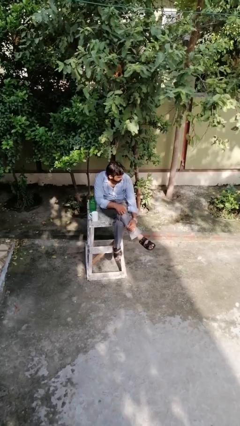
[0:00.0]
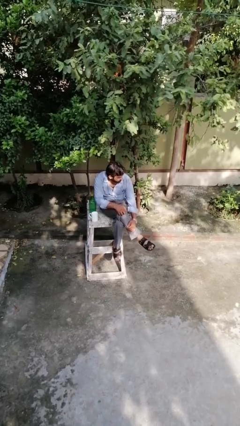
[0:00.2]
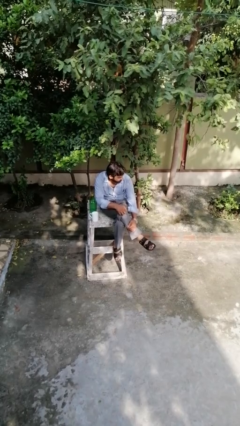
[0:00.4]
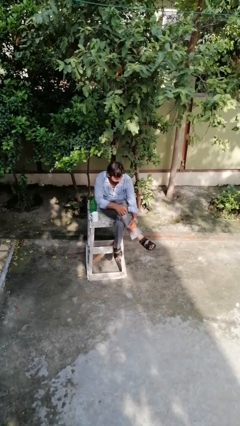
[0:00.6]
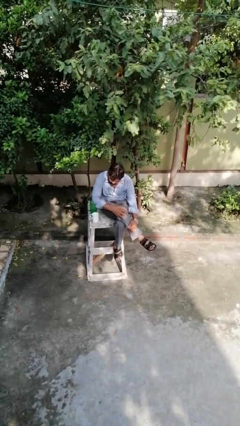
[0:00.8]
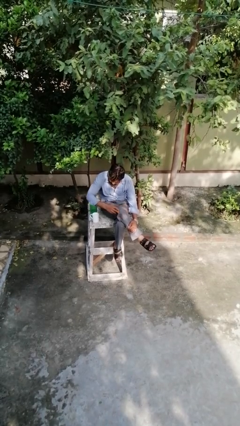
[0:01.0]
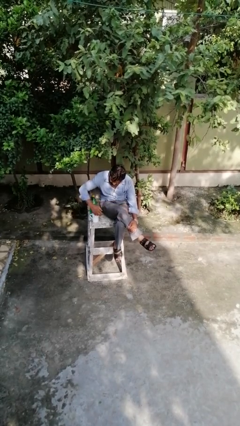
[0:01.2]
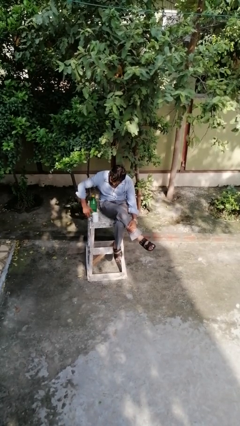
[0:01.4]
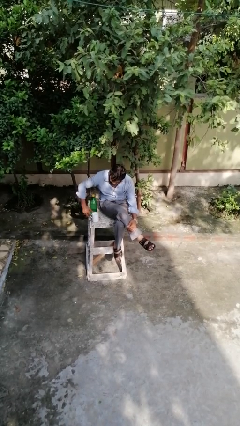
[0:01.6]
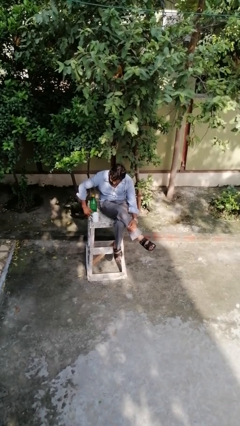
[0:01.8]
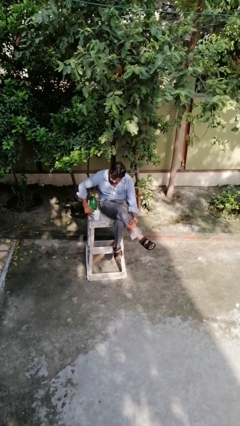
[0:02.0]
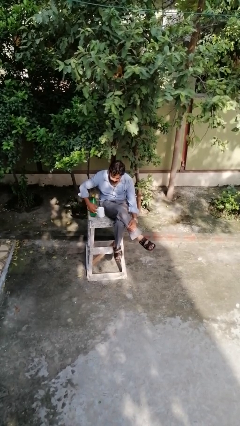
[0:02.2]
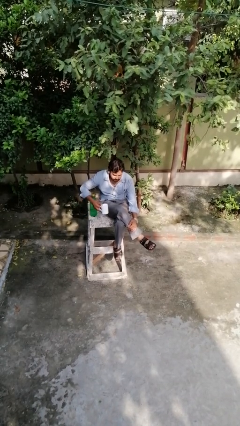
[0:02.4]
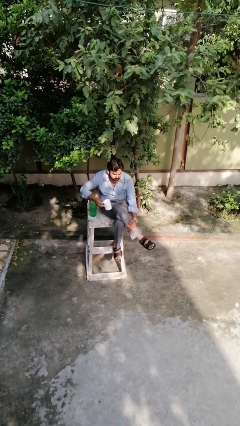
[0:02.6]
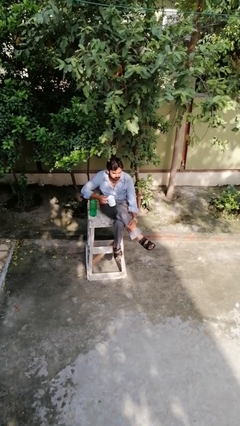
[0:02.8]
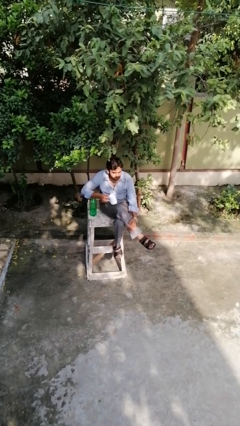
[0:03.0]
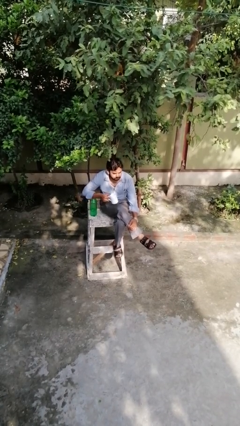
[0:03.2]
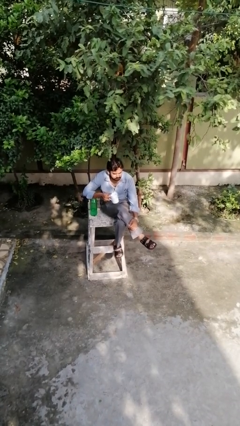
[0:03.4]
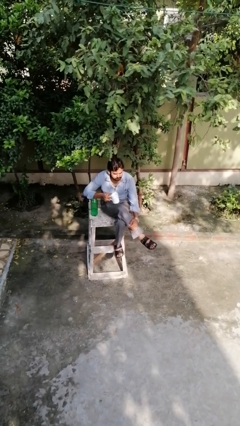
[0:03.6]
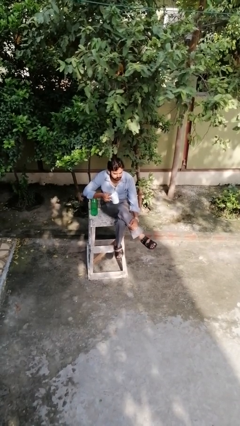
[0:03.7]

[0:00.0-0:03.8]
person picks up object from table

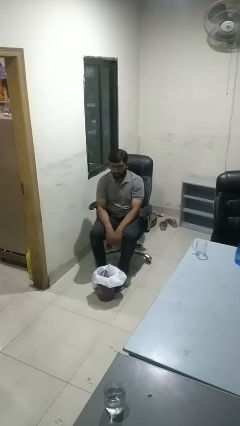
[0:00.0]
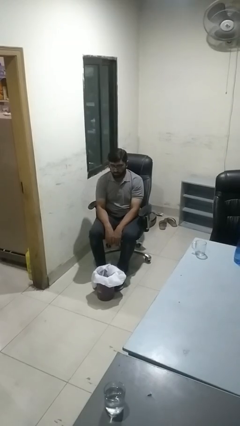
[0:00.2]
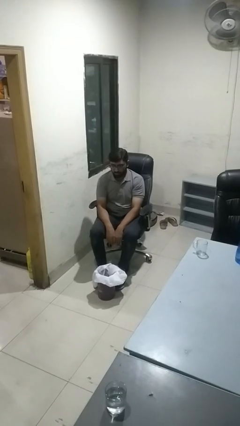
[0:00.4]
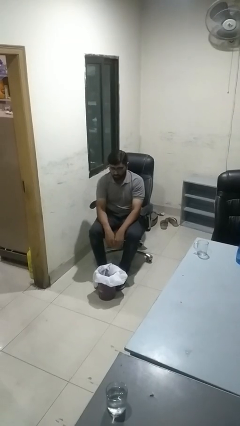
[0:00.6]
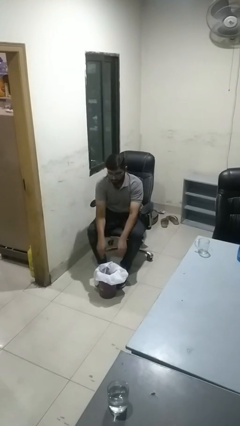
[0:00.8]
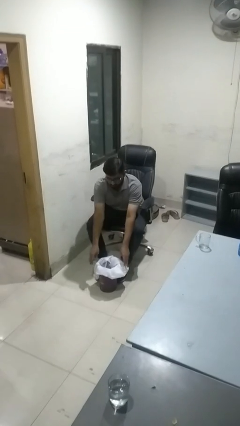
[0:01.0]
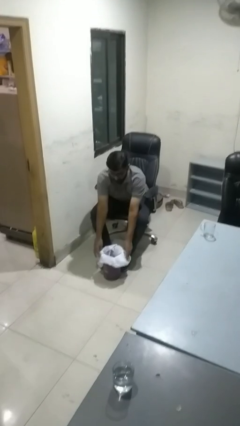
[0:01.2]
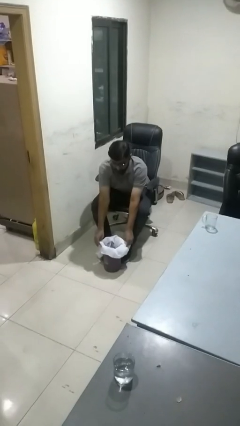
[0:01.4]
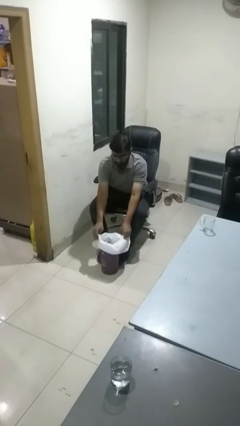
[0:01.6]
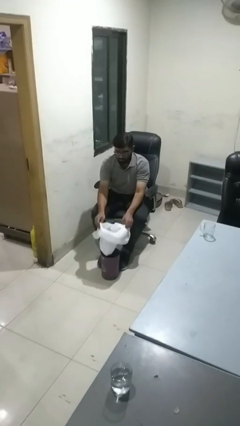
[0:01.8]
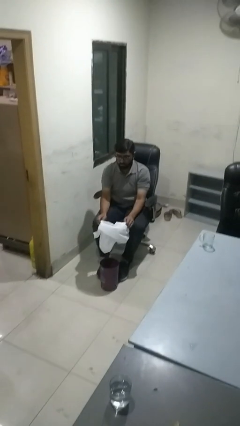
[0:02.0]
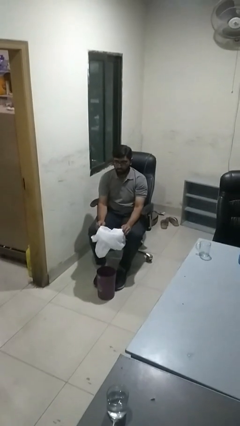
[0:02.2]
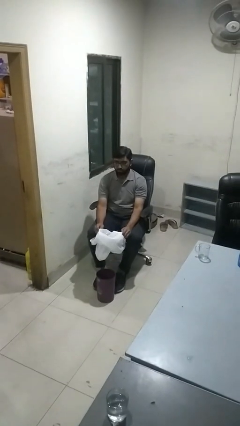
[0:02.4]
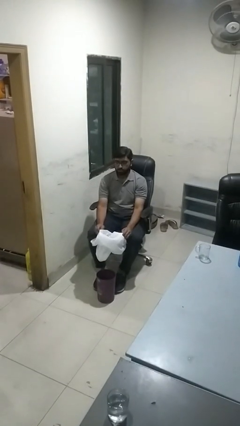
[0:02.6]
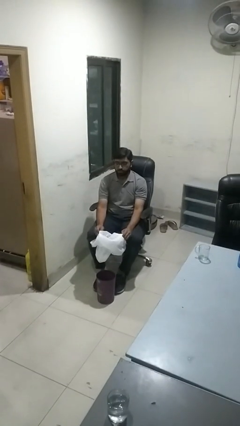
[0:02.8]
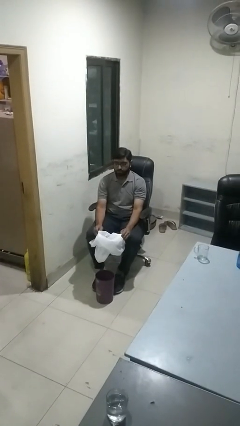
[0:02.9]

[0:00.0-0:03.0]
person removes trashbag from trashcan

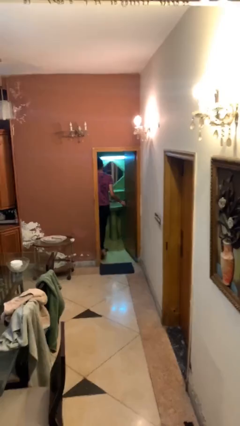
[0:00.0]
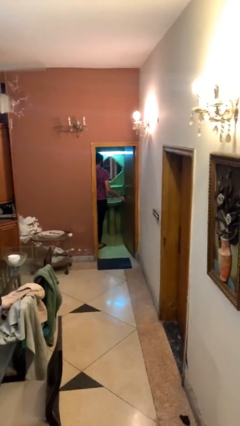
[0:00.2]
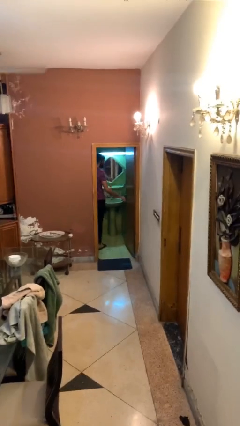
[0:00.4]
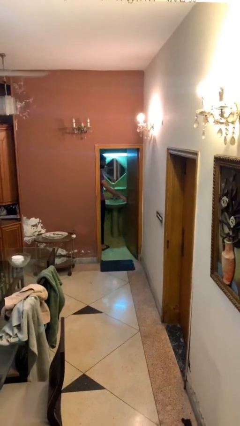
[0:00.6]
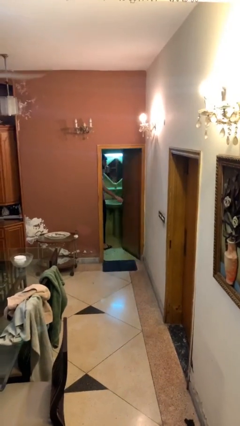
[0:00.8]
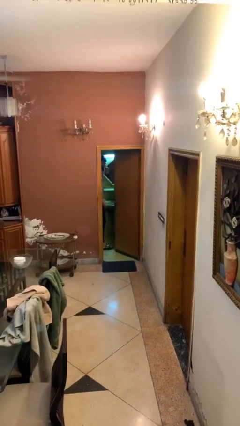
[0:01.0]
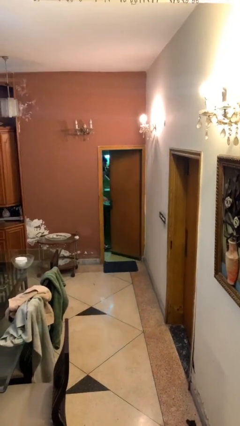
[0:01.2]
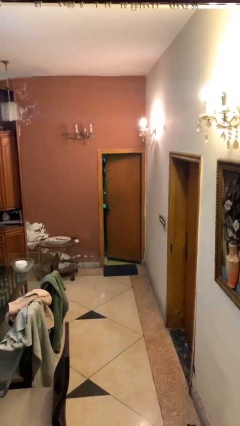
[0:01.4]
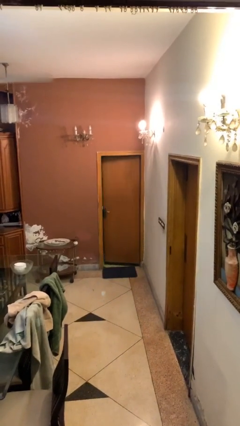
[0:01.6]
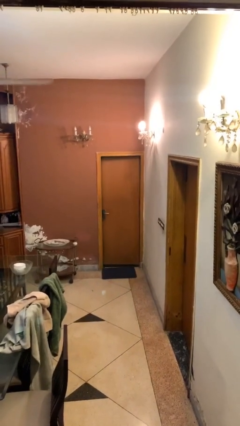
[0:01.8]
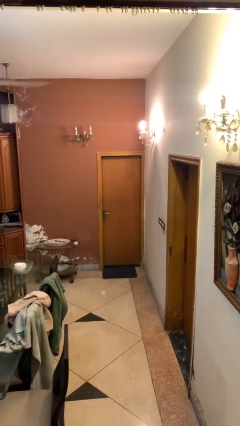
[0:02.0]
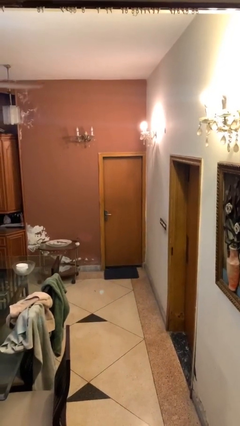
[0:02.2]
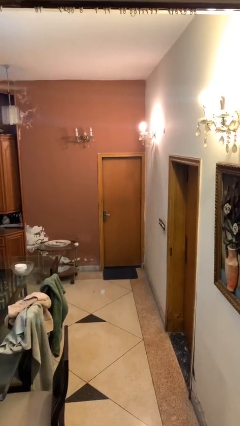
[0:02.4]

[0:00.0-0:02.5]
person closes facility door

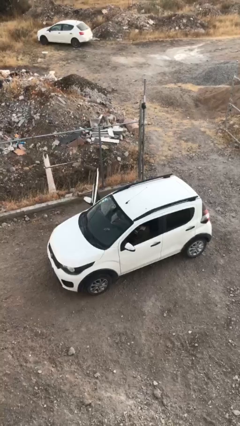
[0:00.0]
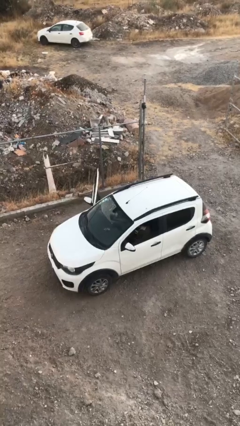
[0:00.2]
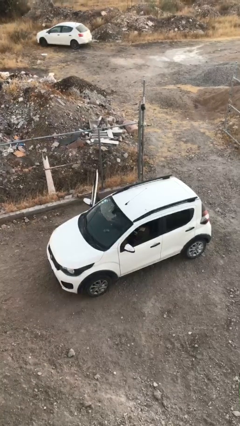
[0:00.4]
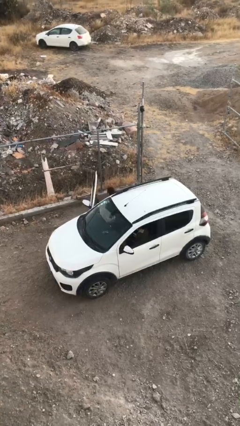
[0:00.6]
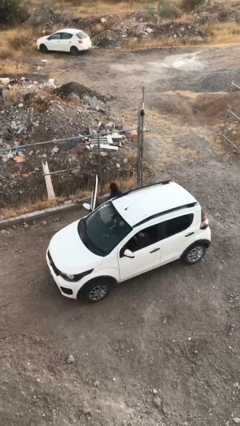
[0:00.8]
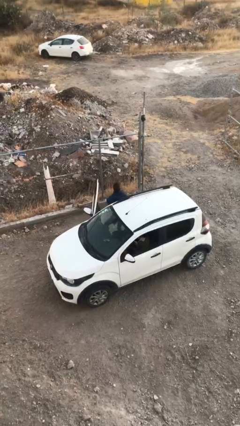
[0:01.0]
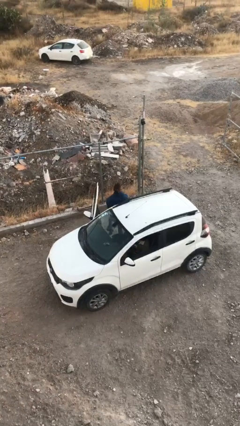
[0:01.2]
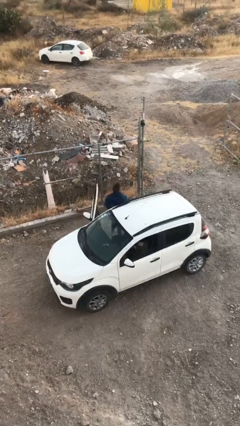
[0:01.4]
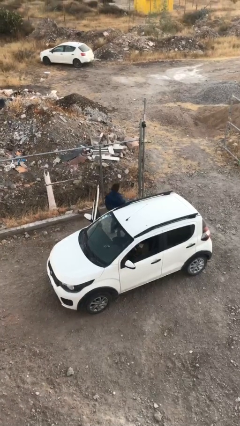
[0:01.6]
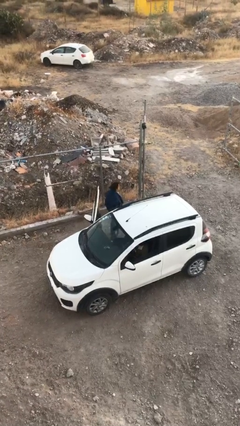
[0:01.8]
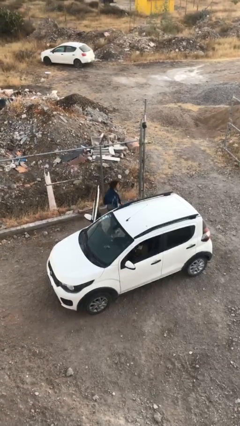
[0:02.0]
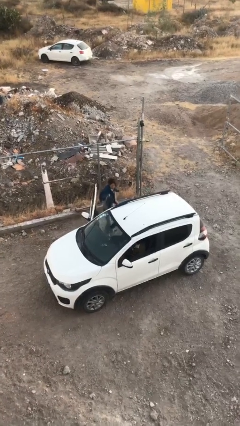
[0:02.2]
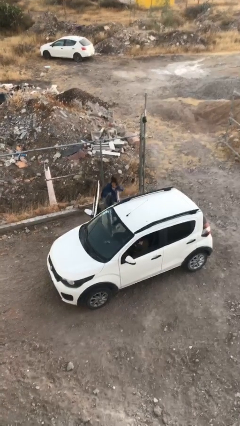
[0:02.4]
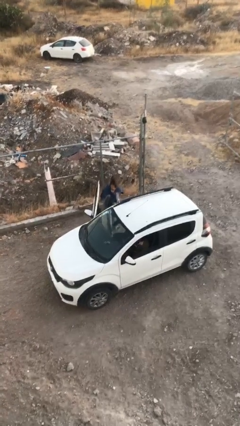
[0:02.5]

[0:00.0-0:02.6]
person exits car

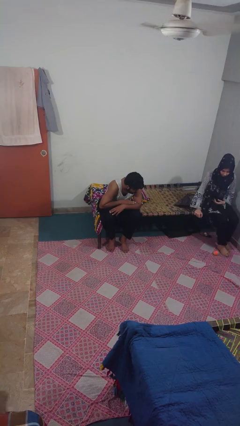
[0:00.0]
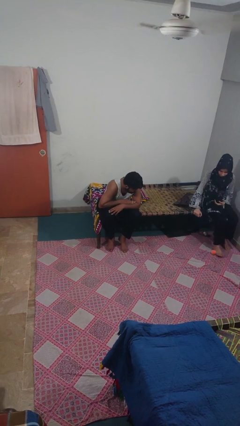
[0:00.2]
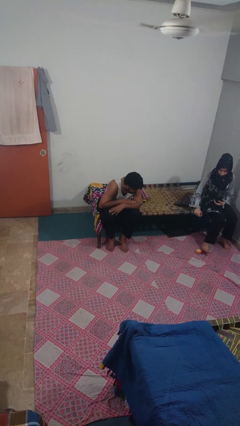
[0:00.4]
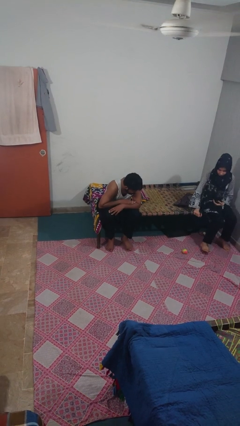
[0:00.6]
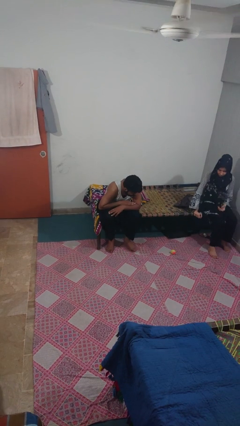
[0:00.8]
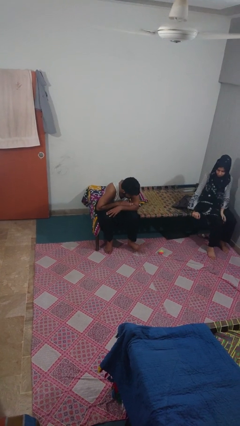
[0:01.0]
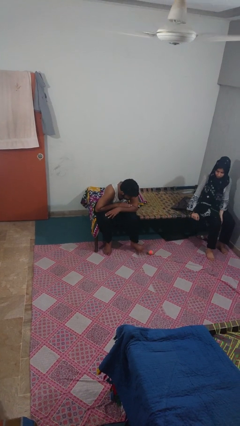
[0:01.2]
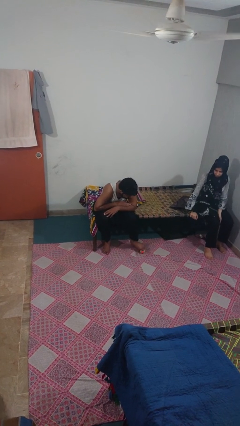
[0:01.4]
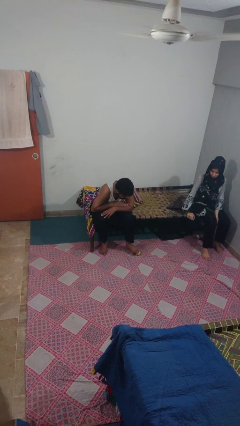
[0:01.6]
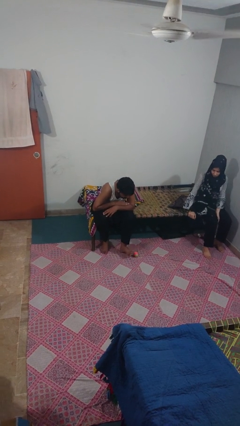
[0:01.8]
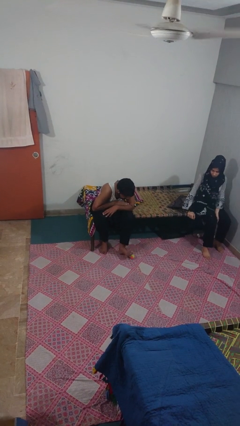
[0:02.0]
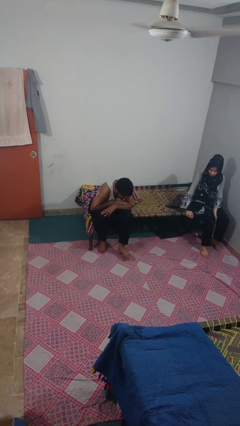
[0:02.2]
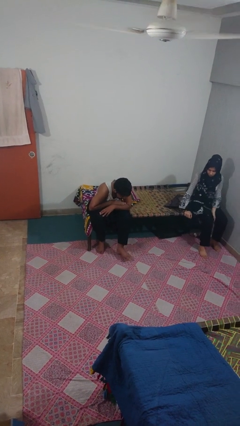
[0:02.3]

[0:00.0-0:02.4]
person kicks object to person

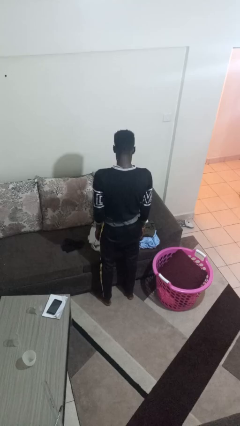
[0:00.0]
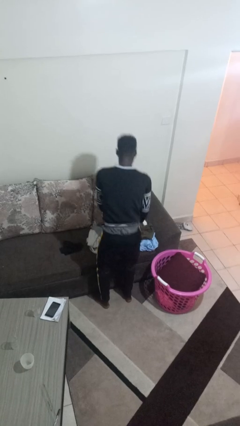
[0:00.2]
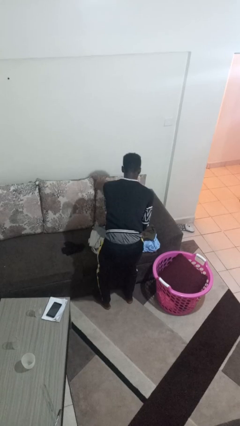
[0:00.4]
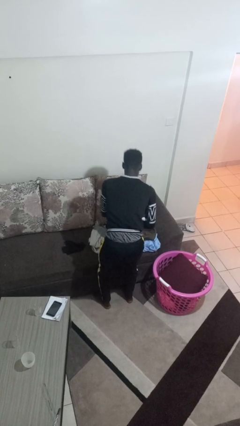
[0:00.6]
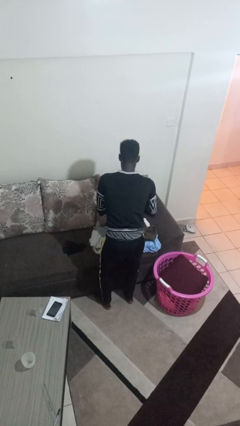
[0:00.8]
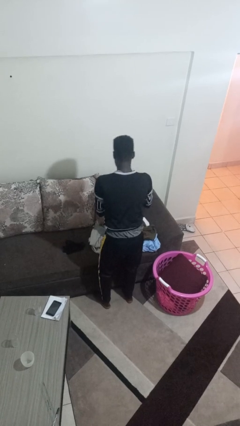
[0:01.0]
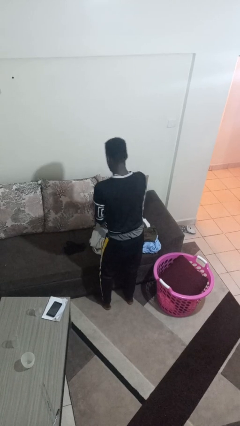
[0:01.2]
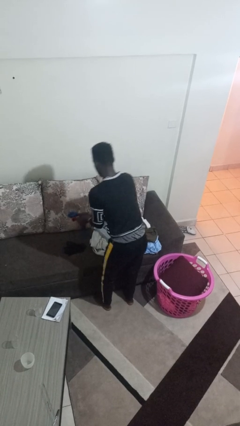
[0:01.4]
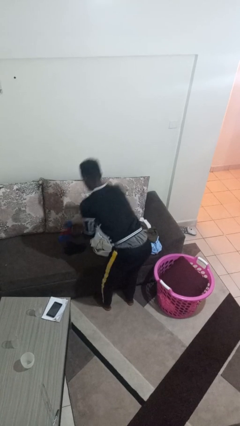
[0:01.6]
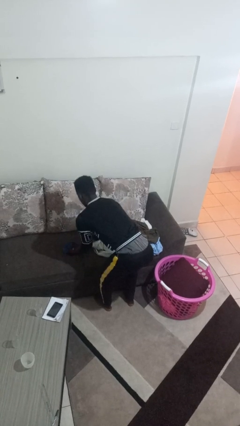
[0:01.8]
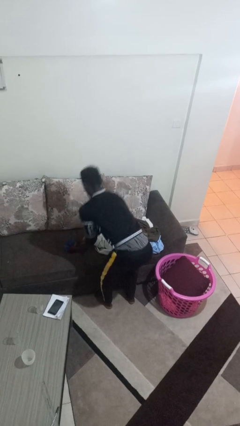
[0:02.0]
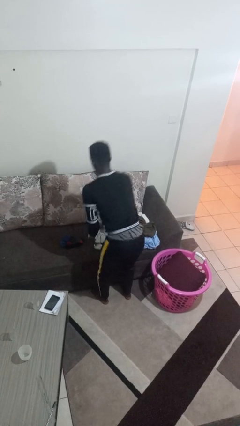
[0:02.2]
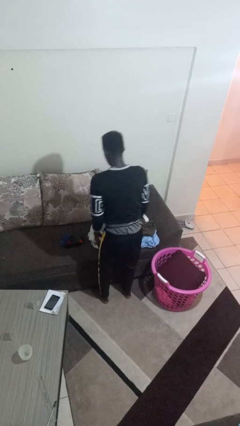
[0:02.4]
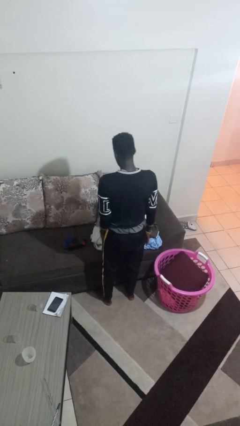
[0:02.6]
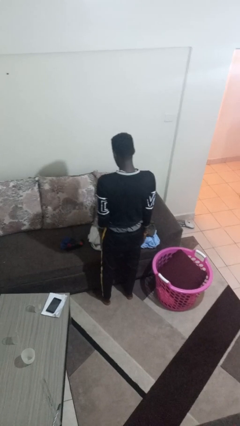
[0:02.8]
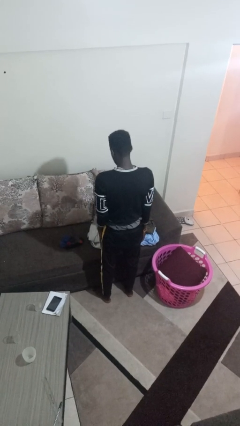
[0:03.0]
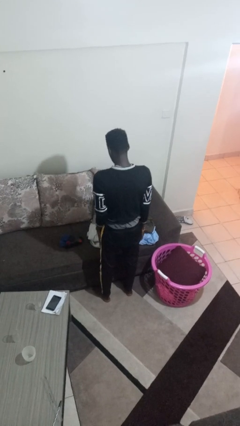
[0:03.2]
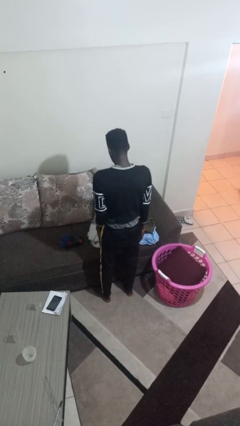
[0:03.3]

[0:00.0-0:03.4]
person folds socks
